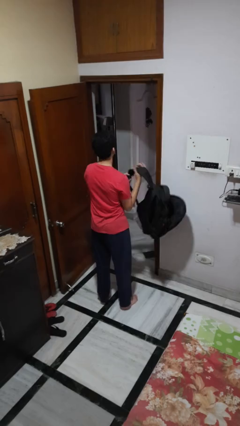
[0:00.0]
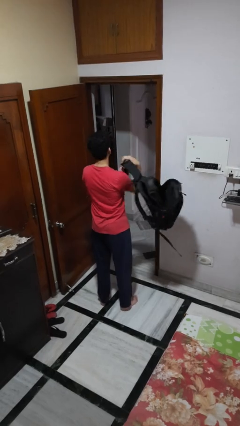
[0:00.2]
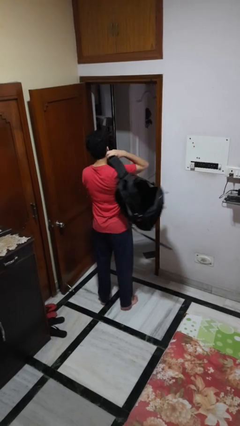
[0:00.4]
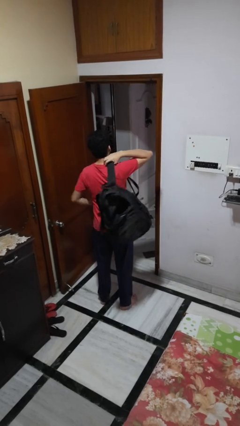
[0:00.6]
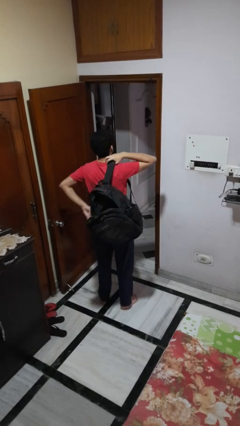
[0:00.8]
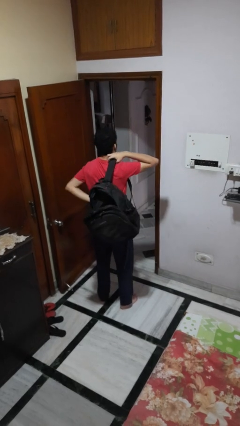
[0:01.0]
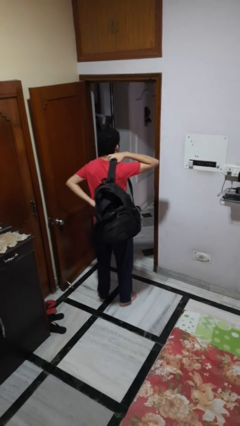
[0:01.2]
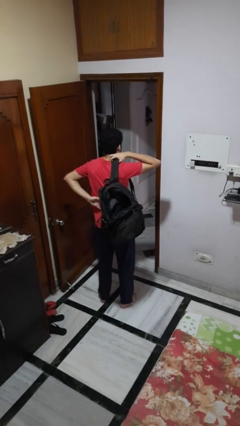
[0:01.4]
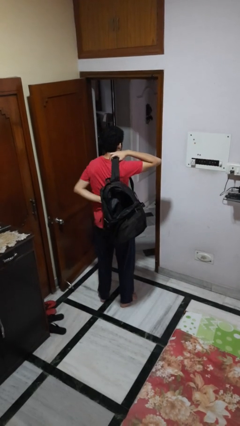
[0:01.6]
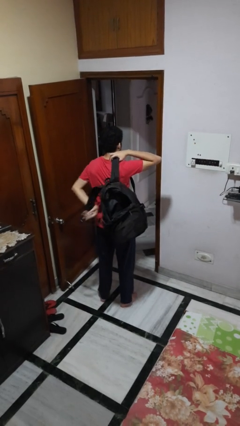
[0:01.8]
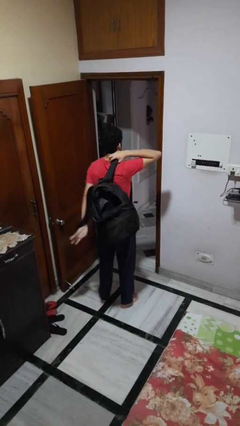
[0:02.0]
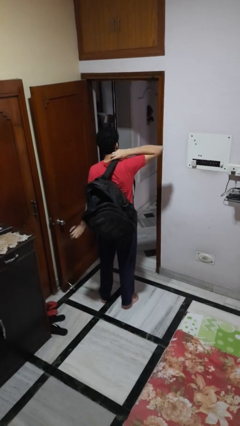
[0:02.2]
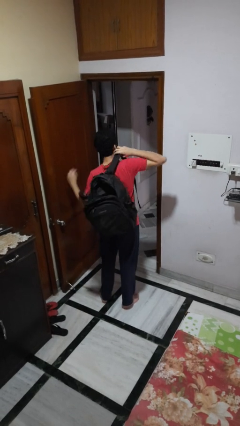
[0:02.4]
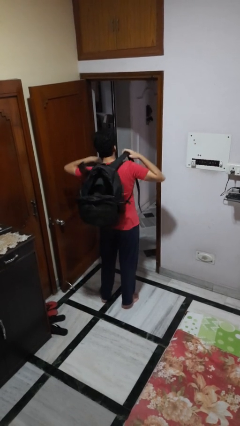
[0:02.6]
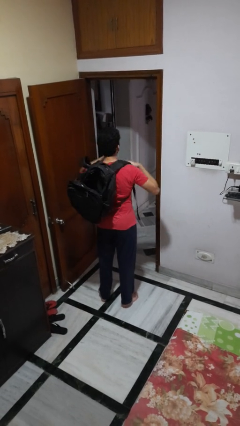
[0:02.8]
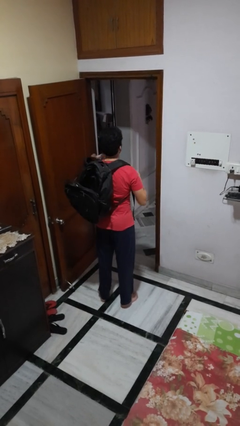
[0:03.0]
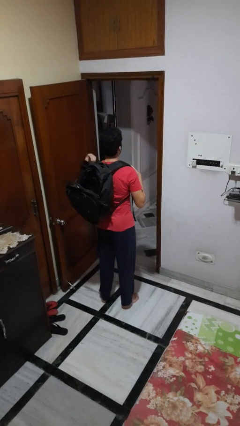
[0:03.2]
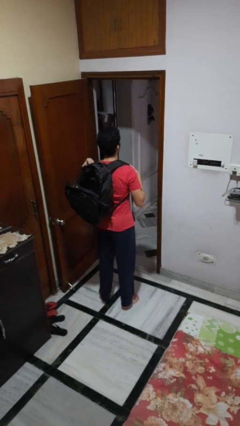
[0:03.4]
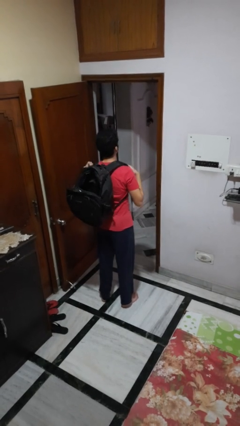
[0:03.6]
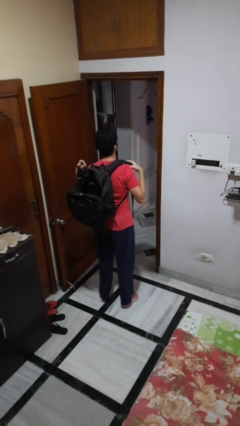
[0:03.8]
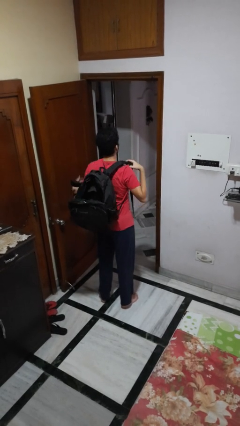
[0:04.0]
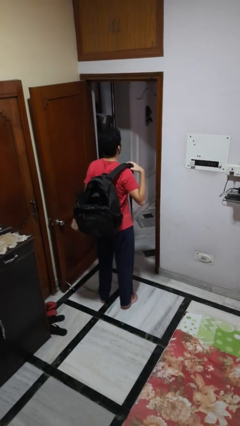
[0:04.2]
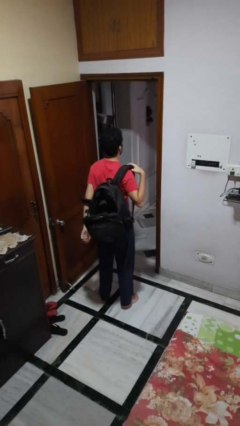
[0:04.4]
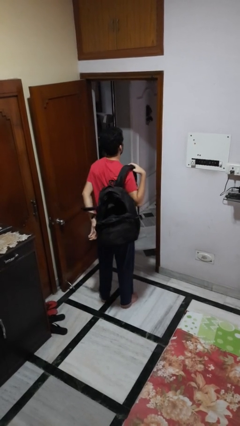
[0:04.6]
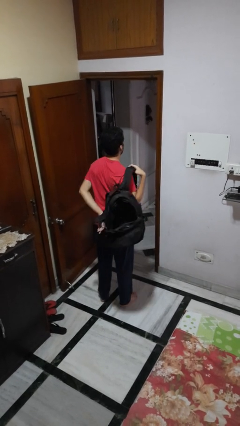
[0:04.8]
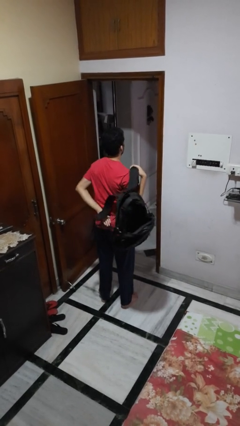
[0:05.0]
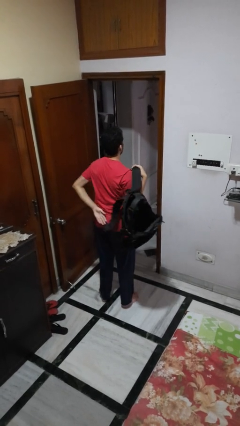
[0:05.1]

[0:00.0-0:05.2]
person puts on backpack

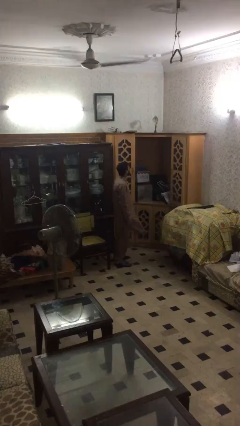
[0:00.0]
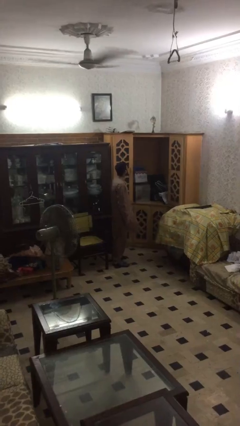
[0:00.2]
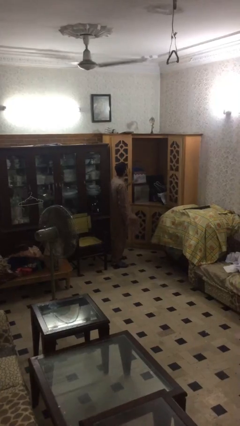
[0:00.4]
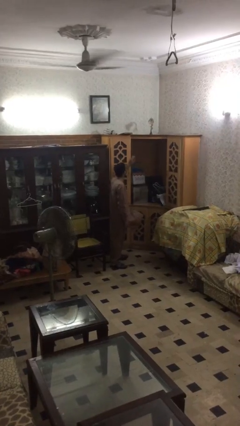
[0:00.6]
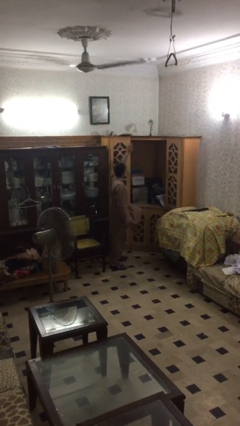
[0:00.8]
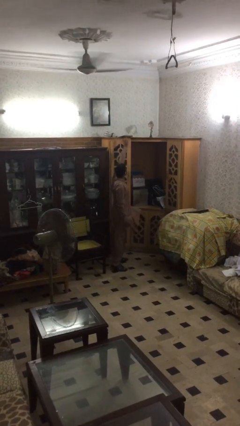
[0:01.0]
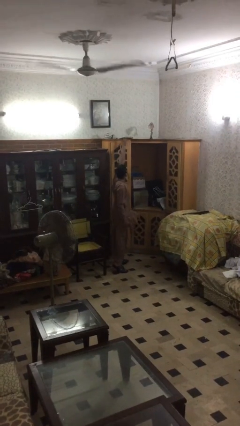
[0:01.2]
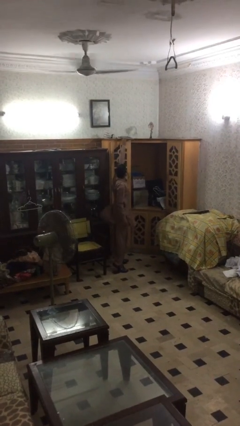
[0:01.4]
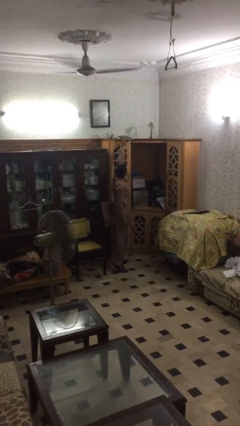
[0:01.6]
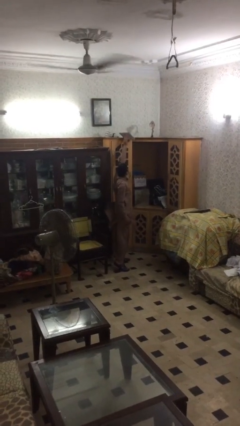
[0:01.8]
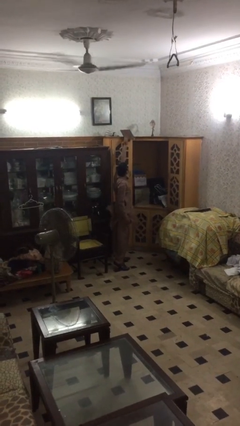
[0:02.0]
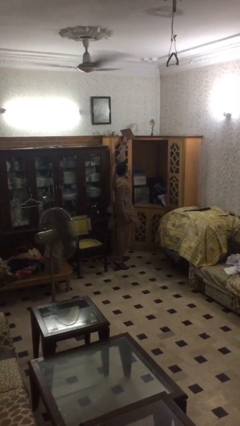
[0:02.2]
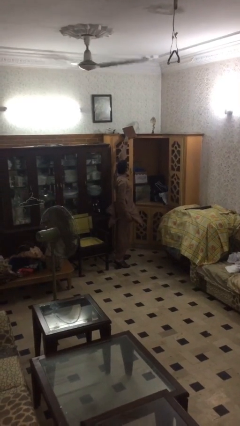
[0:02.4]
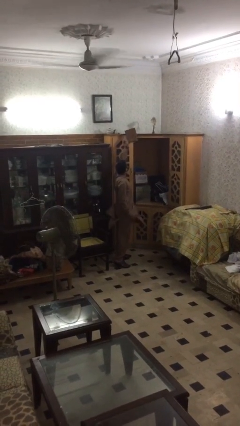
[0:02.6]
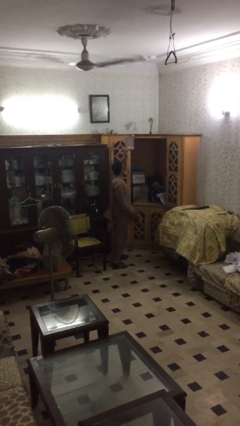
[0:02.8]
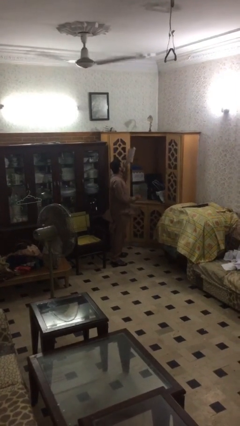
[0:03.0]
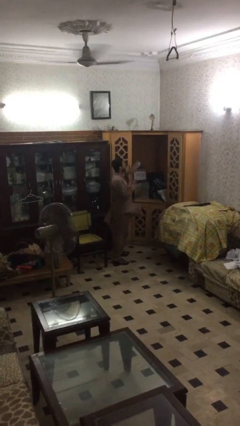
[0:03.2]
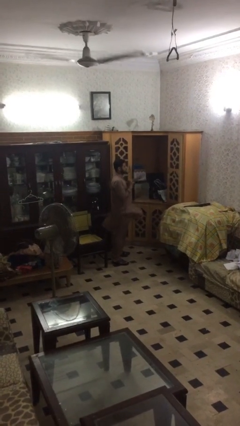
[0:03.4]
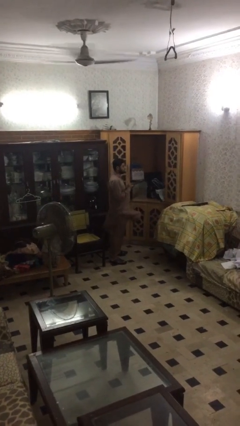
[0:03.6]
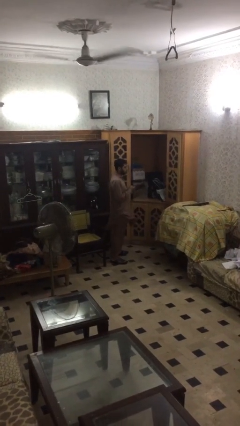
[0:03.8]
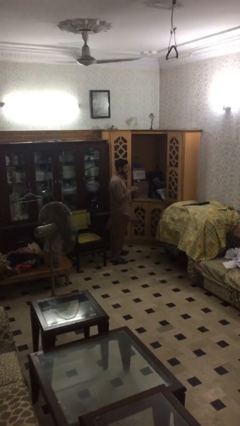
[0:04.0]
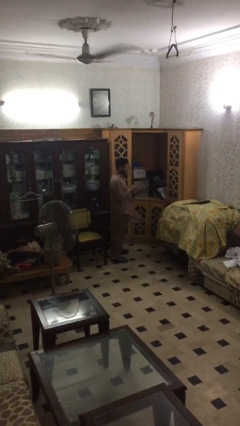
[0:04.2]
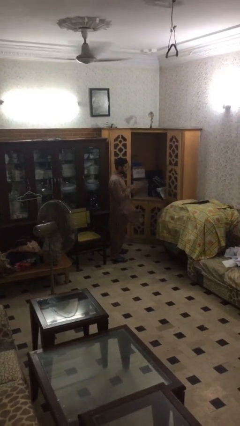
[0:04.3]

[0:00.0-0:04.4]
person picks up object from shelf

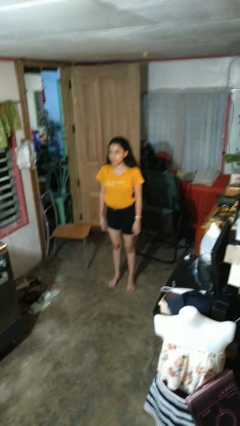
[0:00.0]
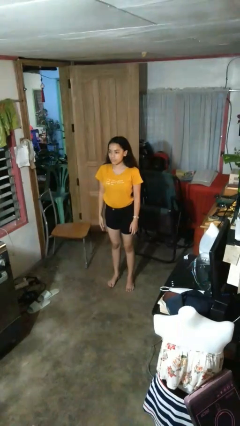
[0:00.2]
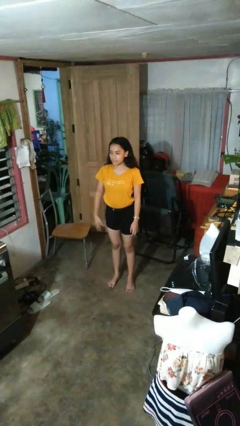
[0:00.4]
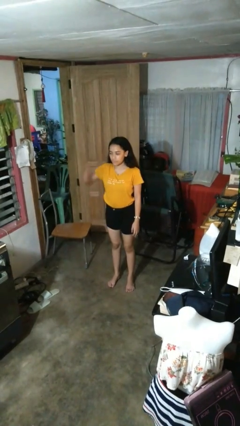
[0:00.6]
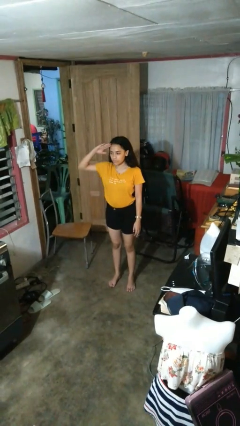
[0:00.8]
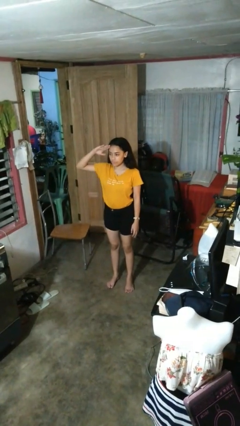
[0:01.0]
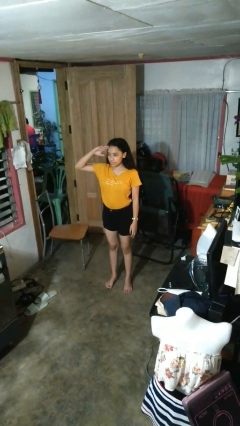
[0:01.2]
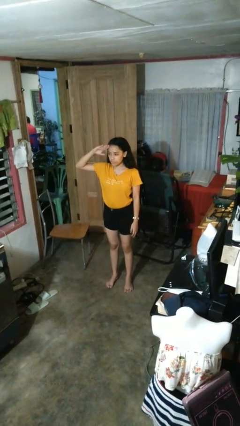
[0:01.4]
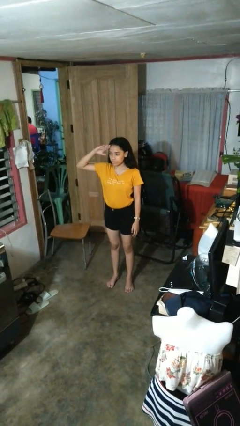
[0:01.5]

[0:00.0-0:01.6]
person salutes

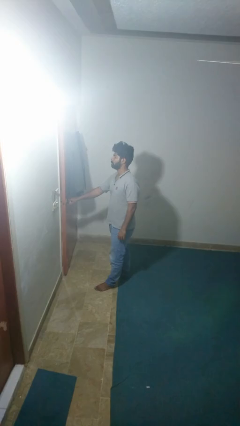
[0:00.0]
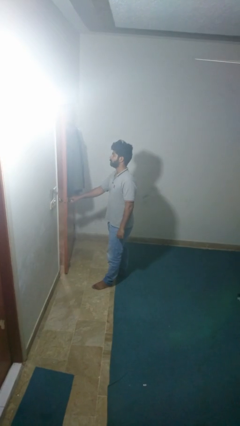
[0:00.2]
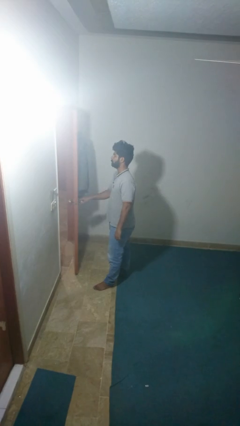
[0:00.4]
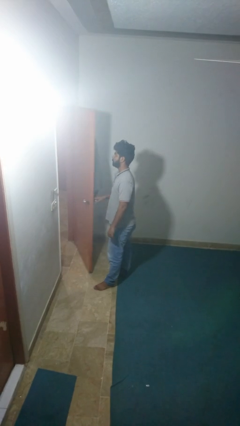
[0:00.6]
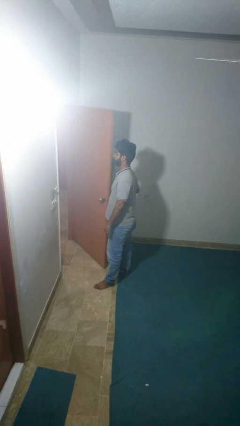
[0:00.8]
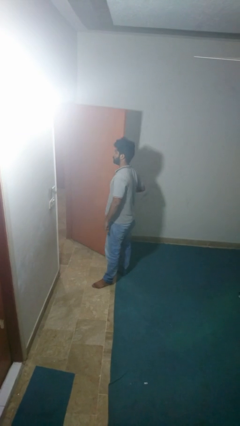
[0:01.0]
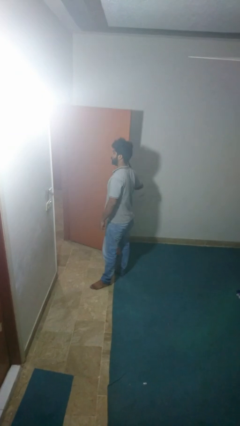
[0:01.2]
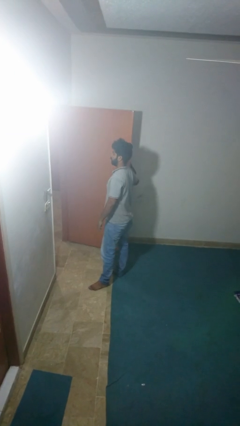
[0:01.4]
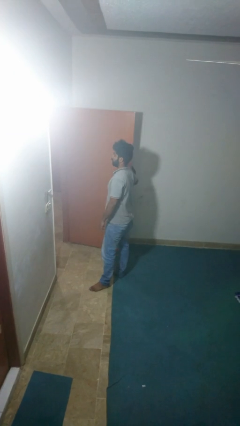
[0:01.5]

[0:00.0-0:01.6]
person opens facility door

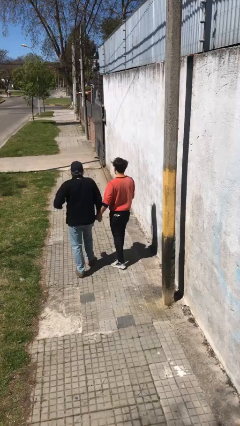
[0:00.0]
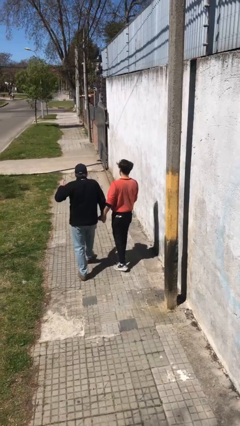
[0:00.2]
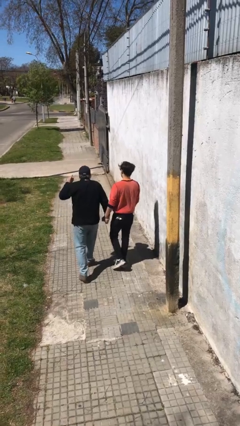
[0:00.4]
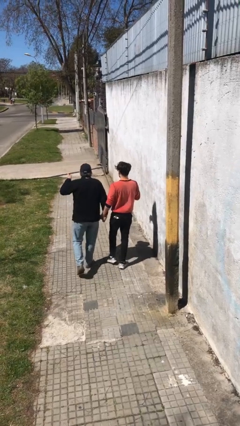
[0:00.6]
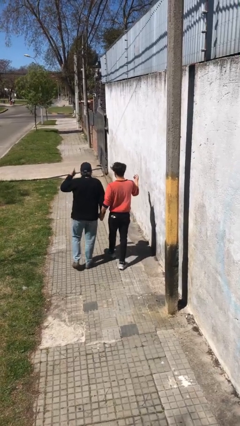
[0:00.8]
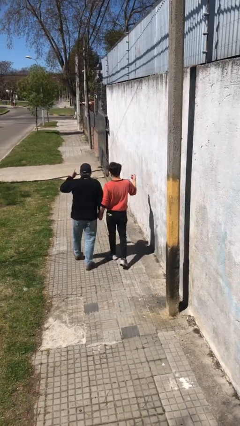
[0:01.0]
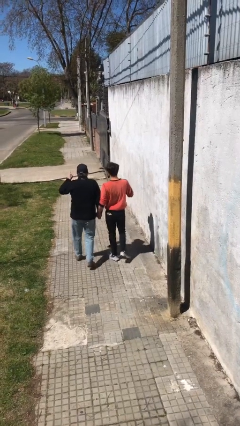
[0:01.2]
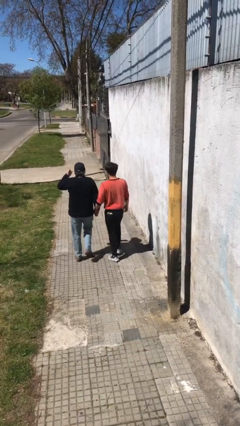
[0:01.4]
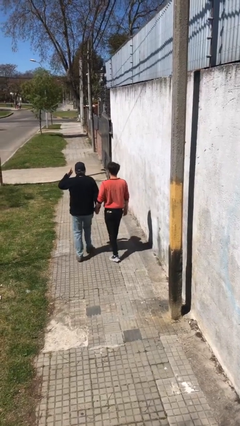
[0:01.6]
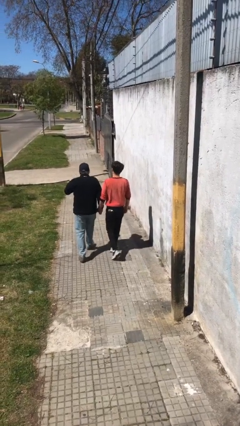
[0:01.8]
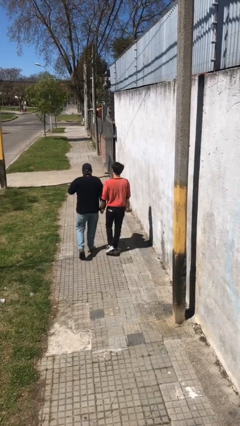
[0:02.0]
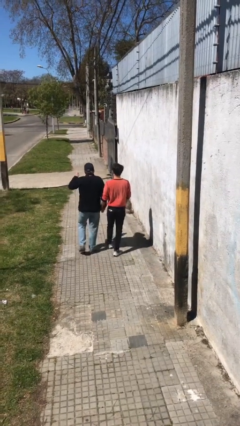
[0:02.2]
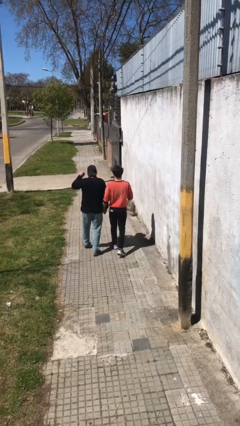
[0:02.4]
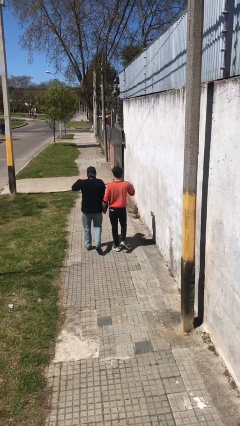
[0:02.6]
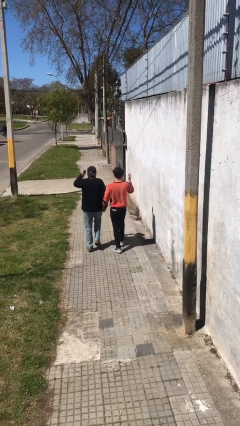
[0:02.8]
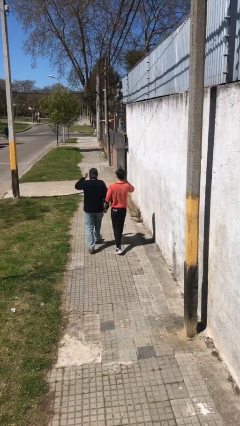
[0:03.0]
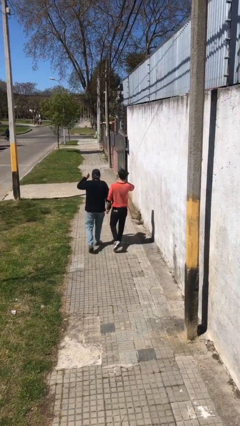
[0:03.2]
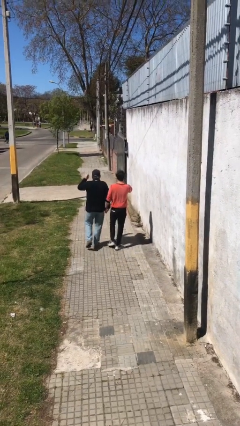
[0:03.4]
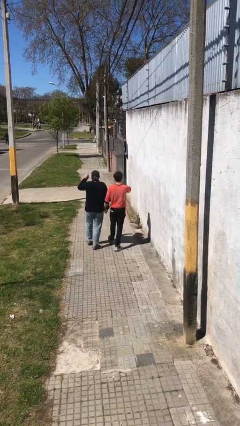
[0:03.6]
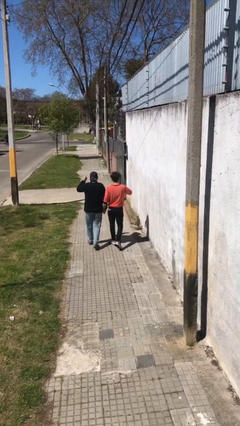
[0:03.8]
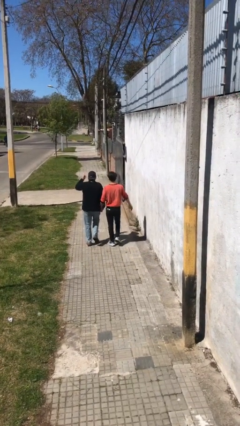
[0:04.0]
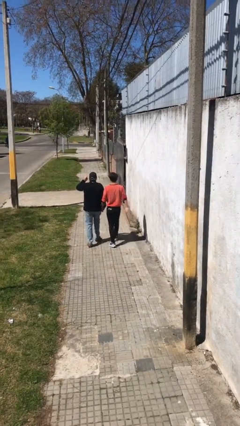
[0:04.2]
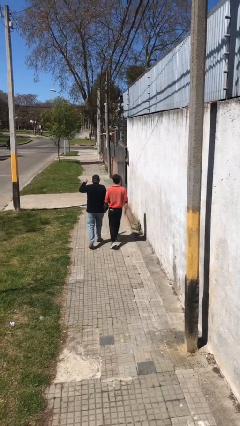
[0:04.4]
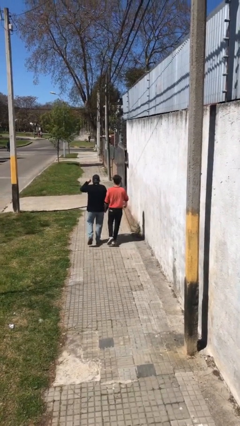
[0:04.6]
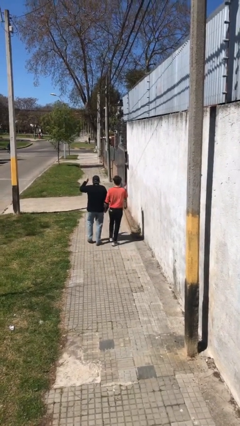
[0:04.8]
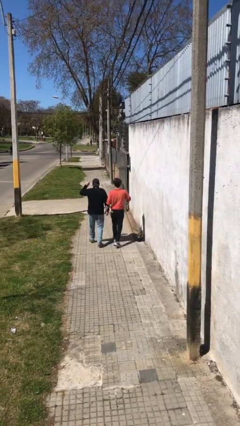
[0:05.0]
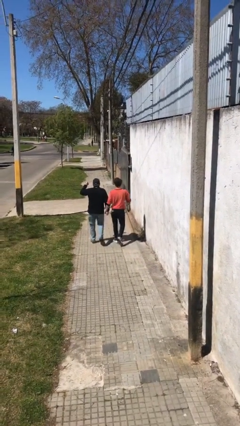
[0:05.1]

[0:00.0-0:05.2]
person holds hand
